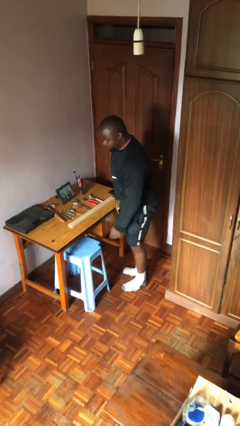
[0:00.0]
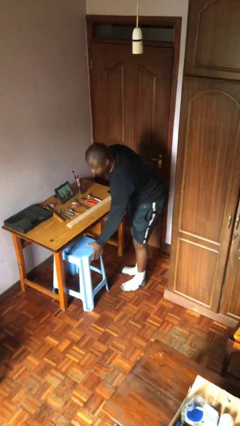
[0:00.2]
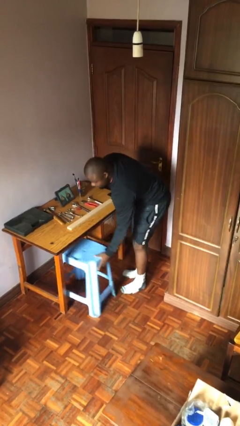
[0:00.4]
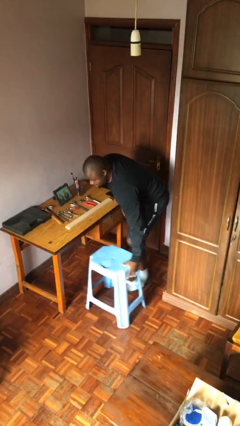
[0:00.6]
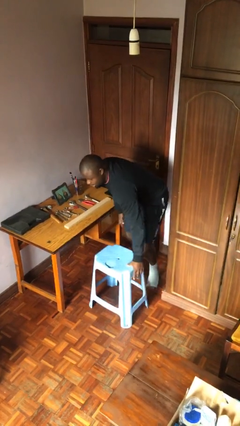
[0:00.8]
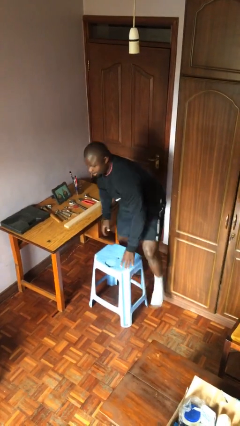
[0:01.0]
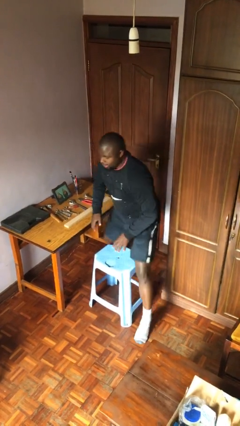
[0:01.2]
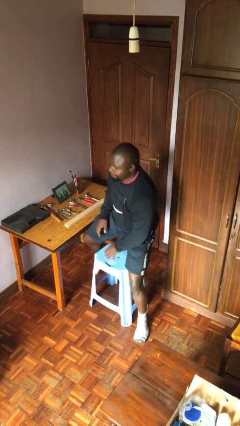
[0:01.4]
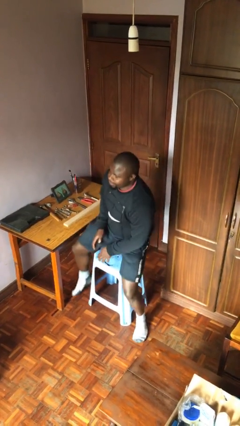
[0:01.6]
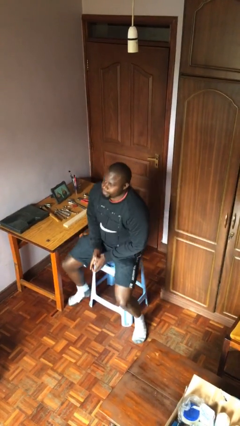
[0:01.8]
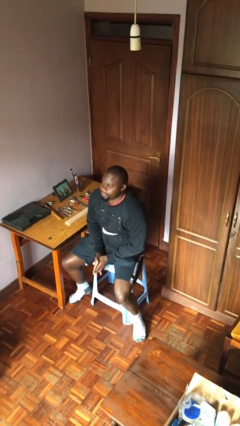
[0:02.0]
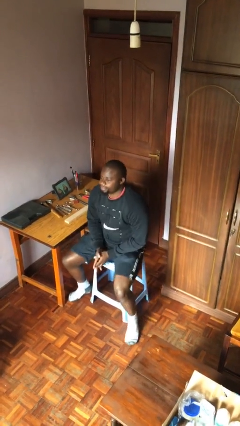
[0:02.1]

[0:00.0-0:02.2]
person sits down

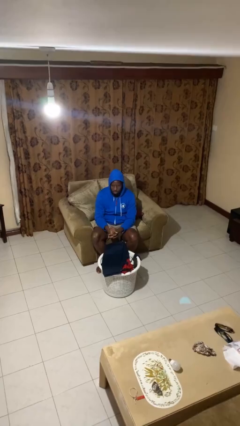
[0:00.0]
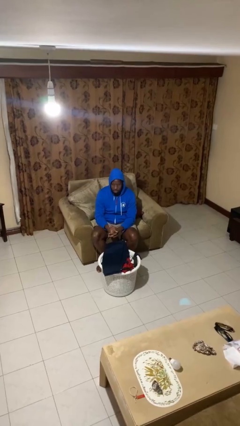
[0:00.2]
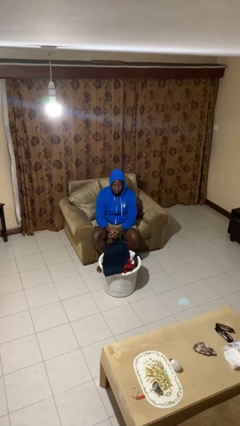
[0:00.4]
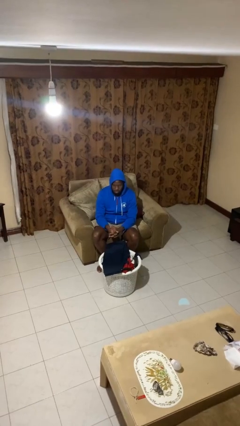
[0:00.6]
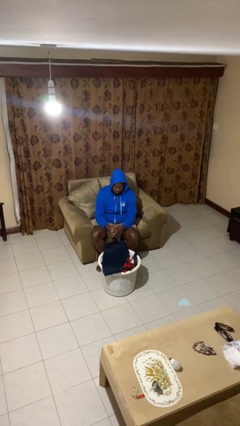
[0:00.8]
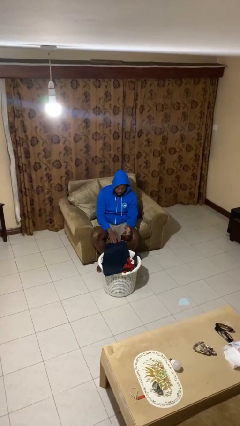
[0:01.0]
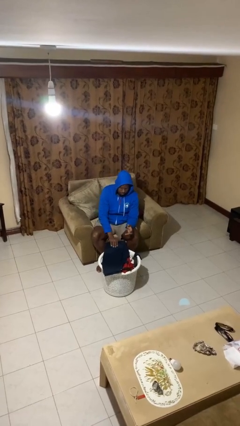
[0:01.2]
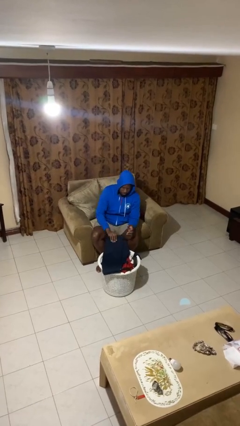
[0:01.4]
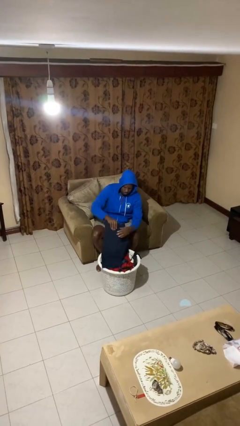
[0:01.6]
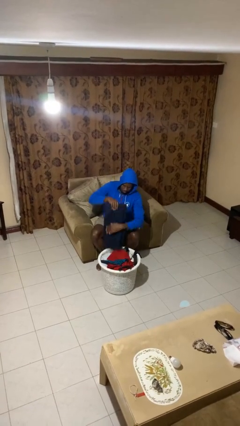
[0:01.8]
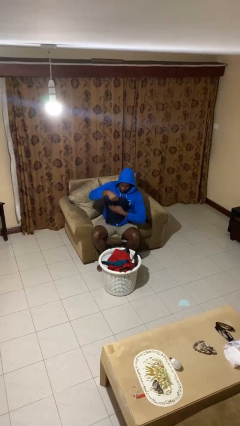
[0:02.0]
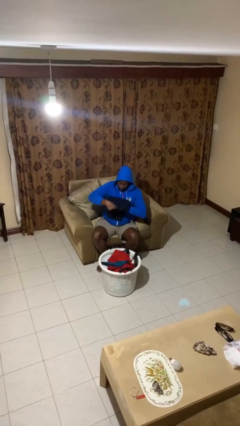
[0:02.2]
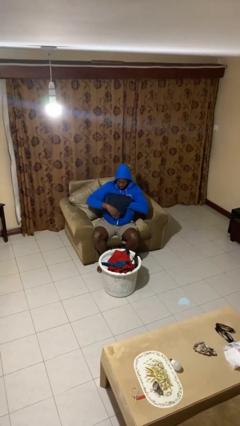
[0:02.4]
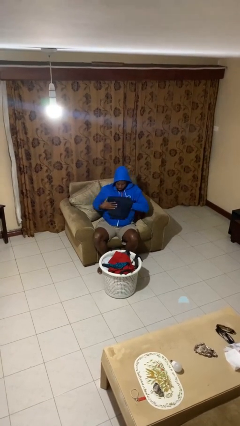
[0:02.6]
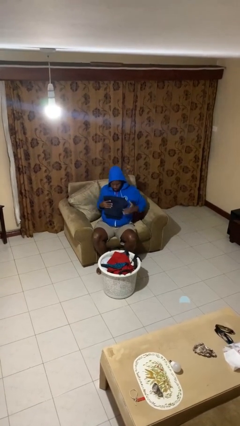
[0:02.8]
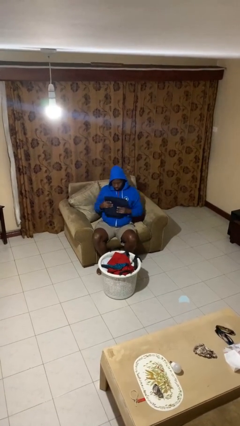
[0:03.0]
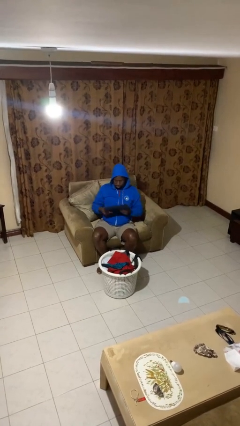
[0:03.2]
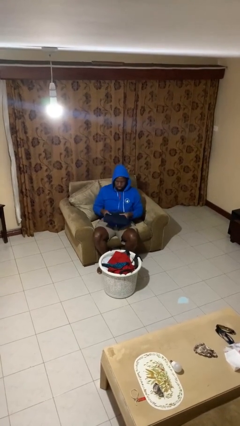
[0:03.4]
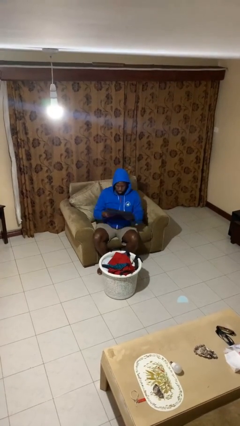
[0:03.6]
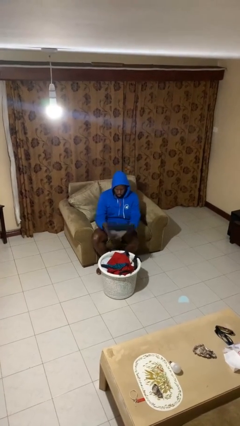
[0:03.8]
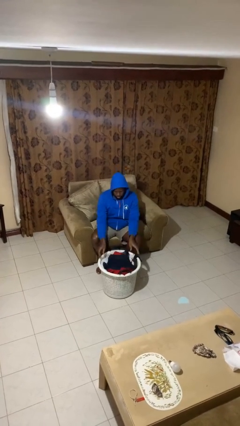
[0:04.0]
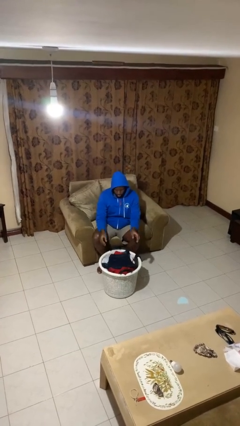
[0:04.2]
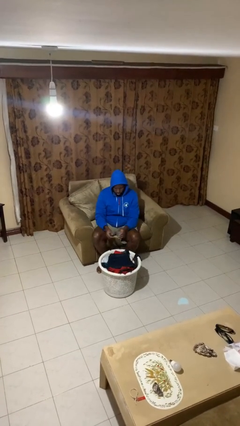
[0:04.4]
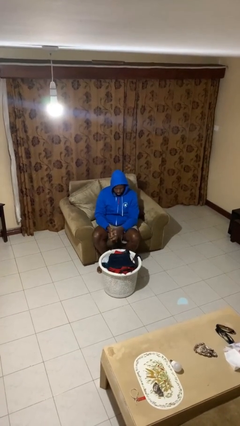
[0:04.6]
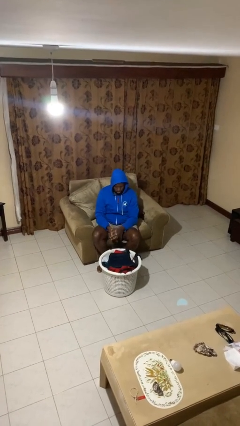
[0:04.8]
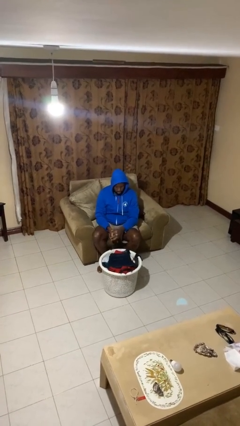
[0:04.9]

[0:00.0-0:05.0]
person folds pants

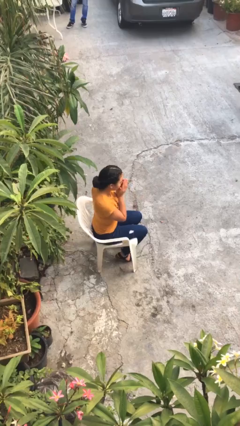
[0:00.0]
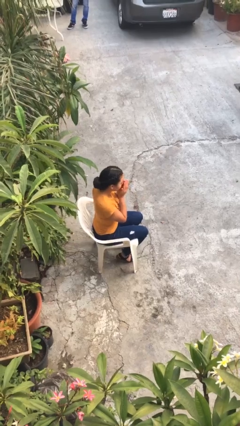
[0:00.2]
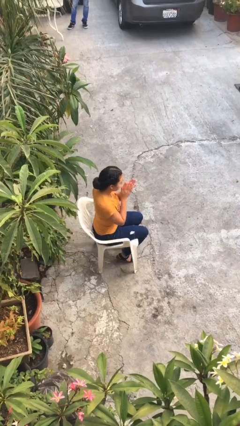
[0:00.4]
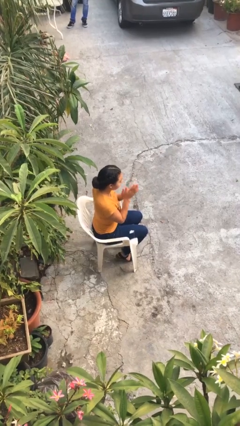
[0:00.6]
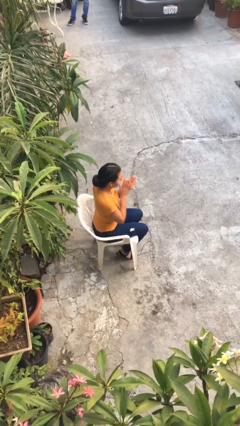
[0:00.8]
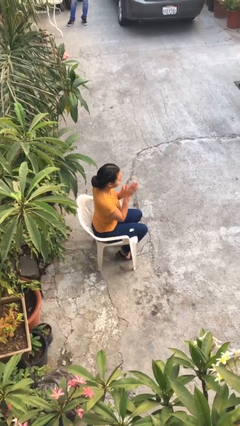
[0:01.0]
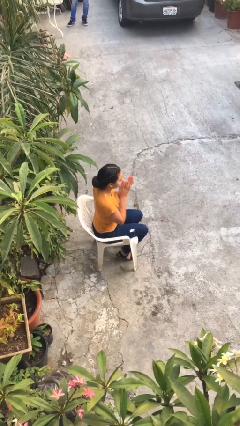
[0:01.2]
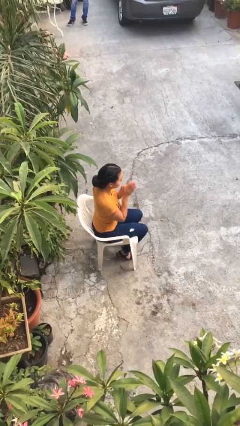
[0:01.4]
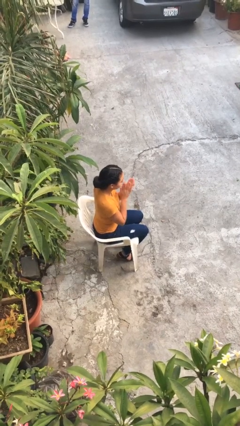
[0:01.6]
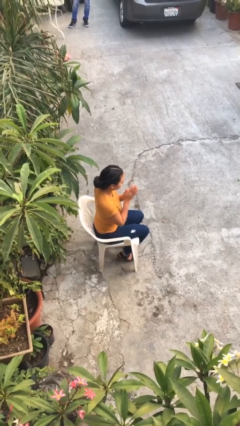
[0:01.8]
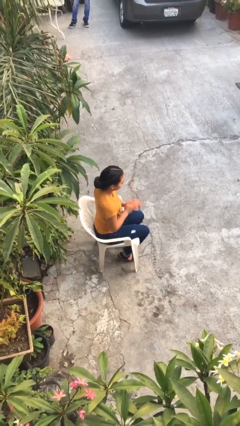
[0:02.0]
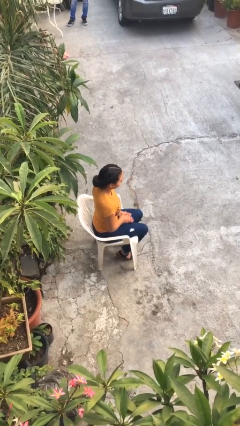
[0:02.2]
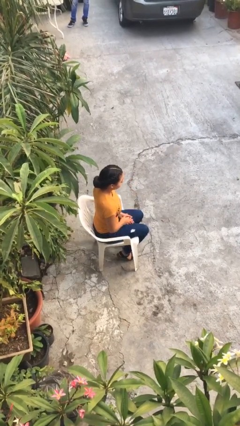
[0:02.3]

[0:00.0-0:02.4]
person blows into hands

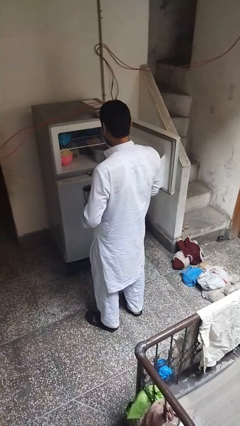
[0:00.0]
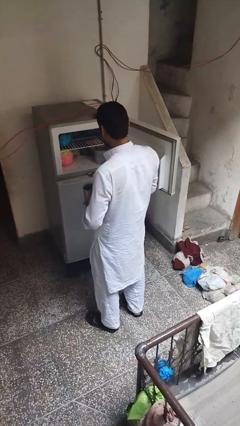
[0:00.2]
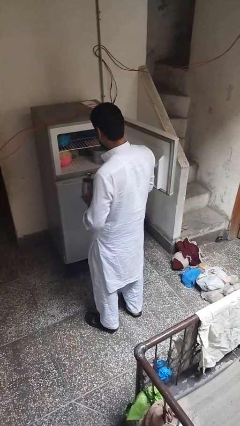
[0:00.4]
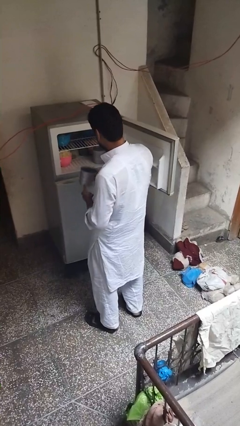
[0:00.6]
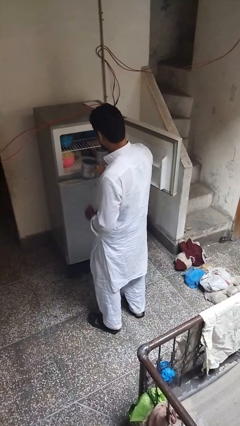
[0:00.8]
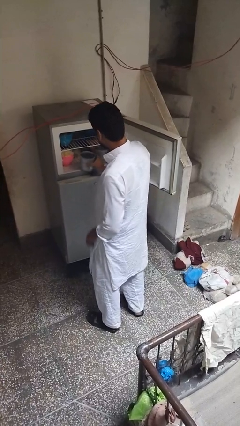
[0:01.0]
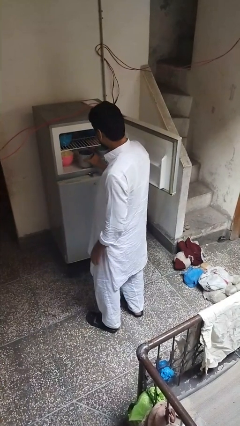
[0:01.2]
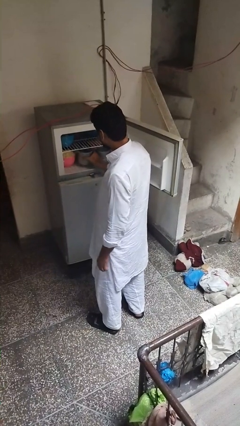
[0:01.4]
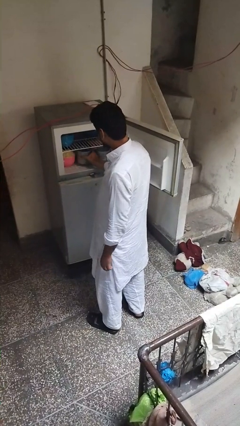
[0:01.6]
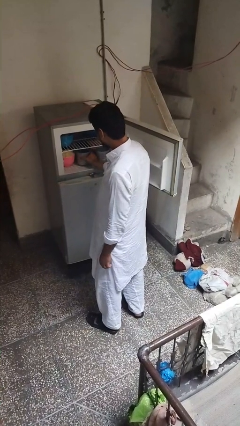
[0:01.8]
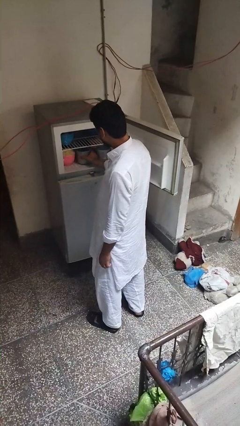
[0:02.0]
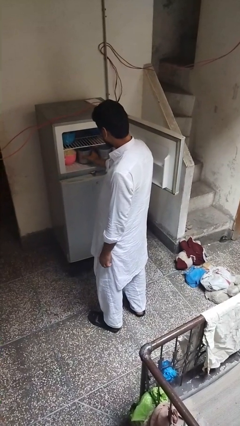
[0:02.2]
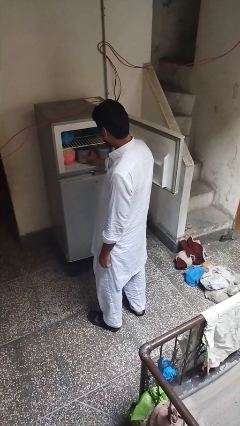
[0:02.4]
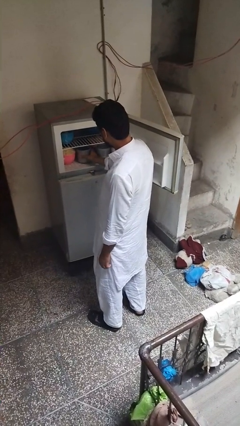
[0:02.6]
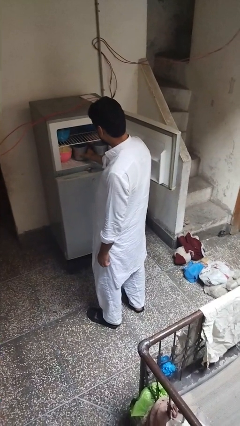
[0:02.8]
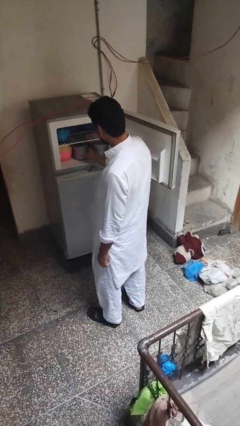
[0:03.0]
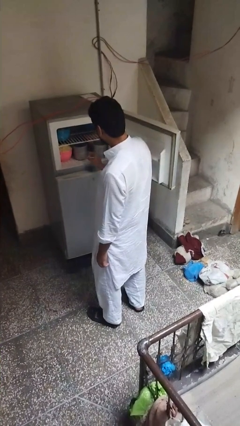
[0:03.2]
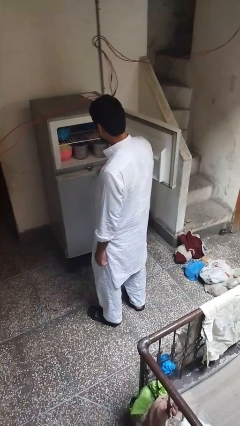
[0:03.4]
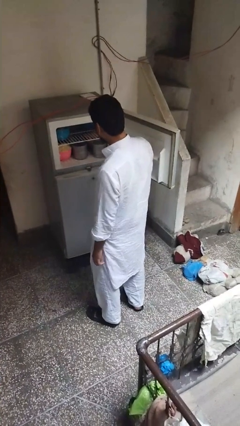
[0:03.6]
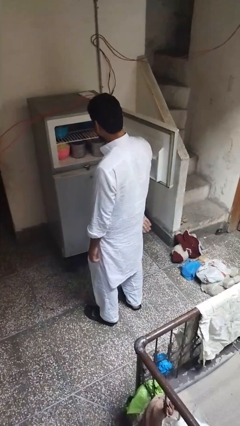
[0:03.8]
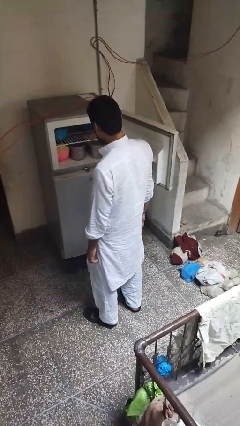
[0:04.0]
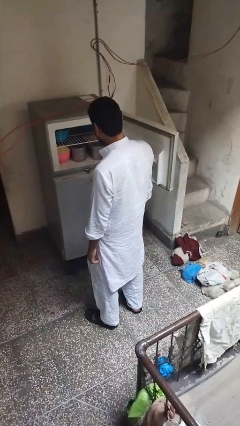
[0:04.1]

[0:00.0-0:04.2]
person puts object into refrigerator

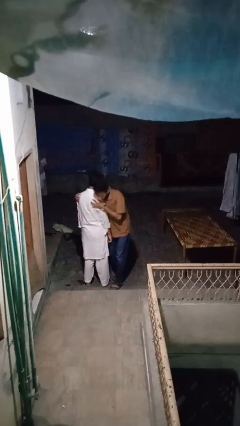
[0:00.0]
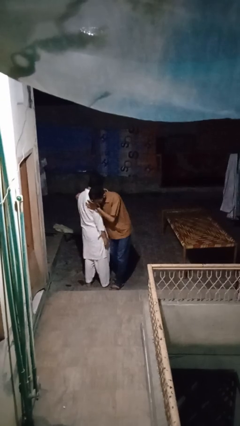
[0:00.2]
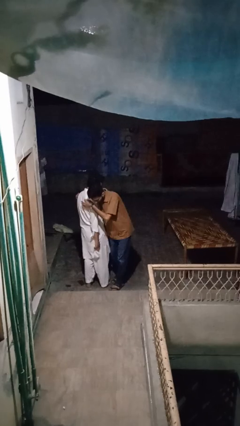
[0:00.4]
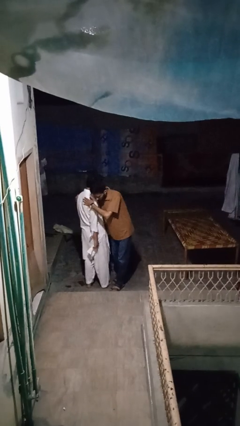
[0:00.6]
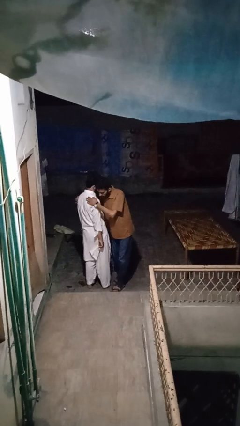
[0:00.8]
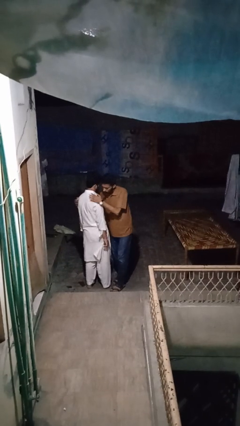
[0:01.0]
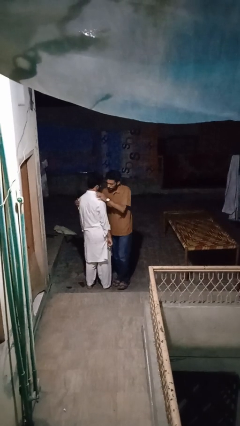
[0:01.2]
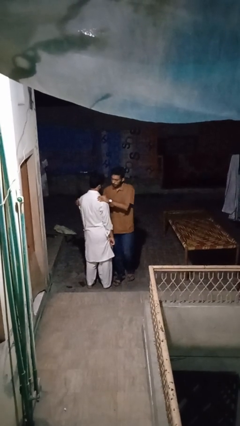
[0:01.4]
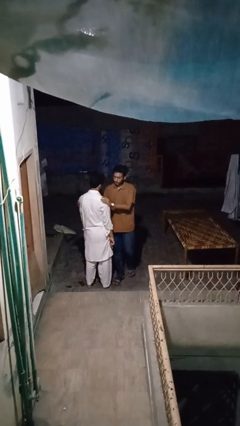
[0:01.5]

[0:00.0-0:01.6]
person bumps into person

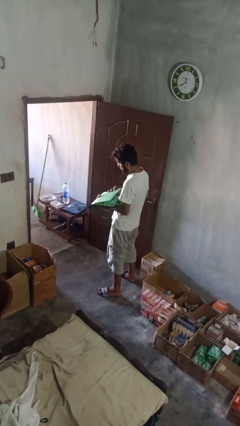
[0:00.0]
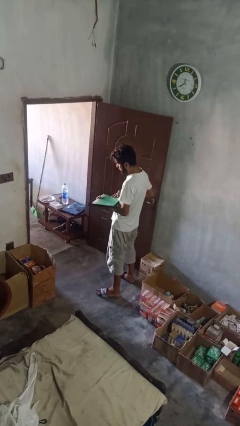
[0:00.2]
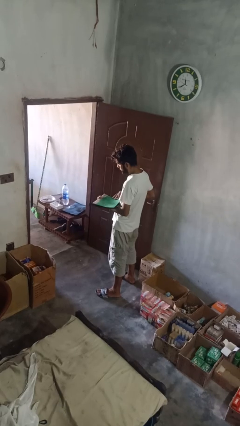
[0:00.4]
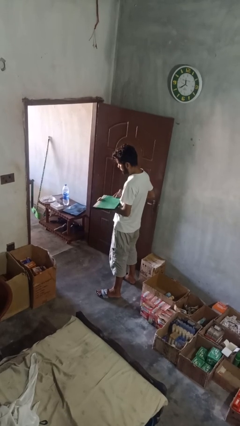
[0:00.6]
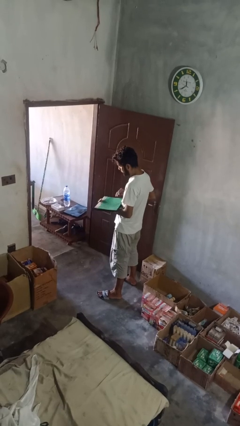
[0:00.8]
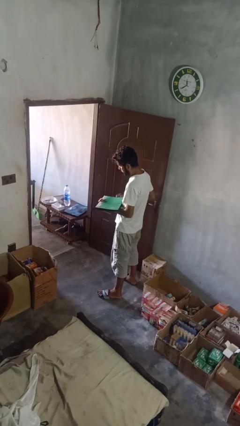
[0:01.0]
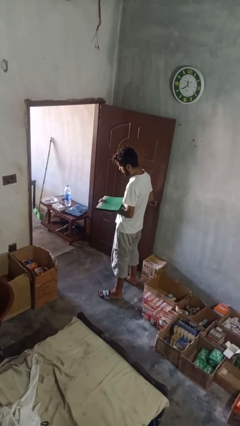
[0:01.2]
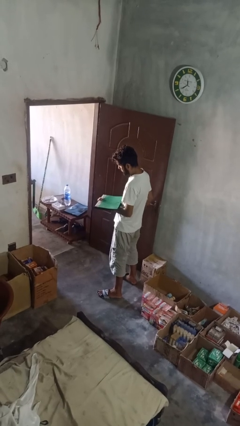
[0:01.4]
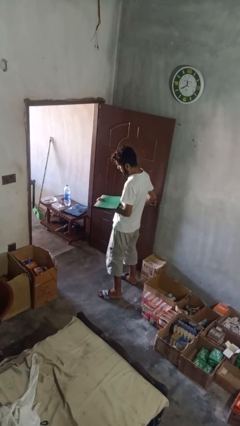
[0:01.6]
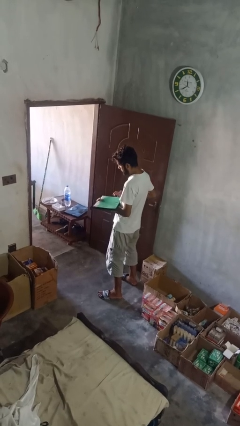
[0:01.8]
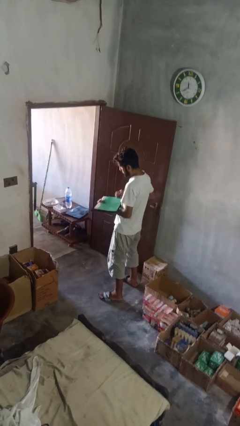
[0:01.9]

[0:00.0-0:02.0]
person closes laptop
